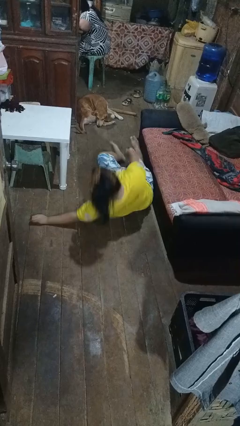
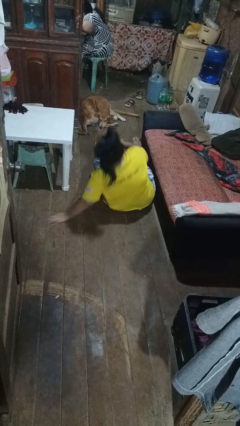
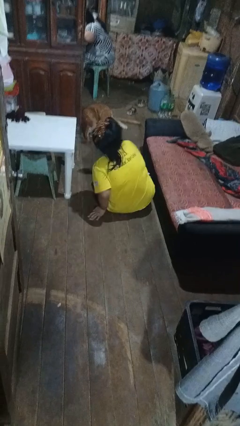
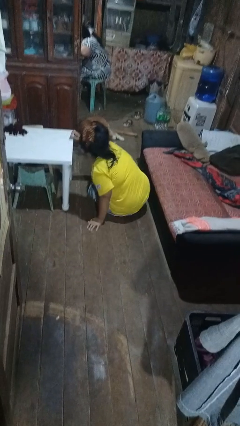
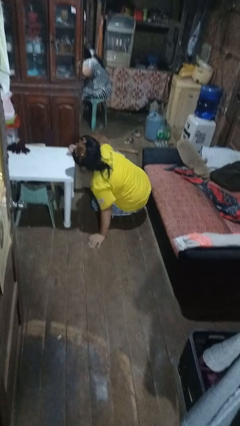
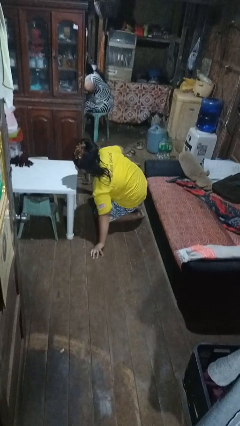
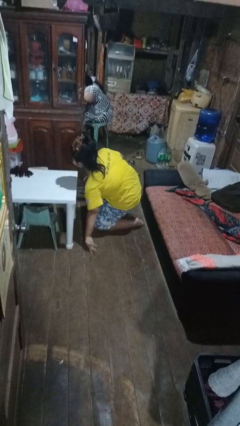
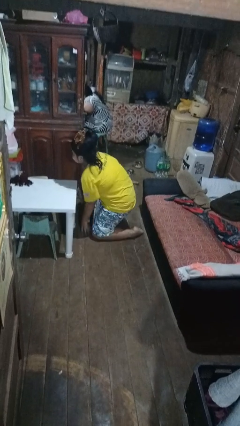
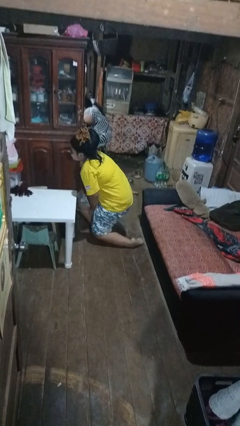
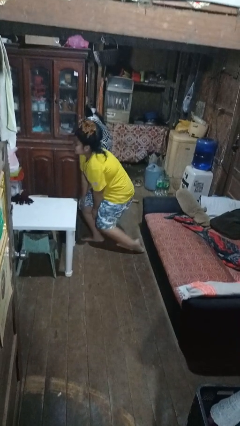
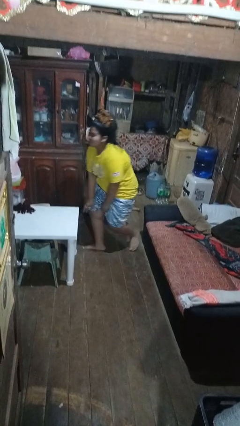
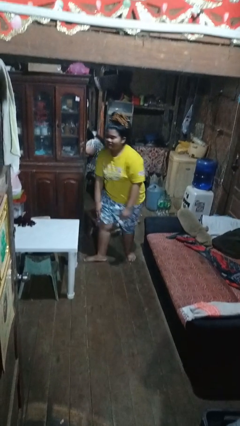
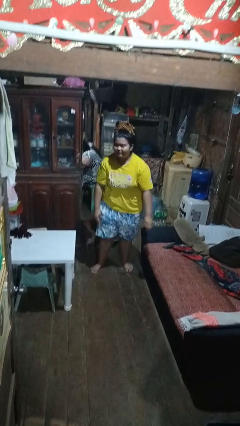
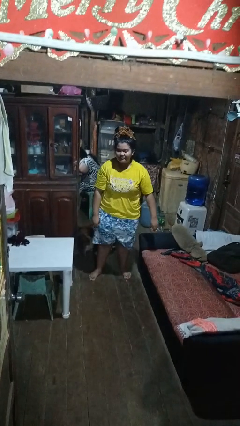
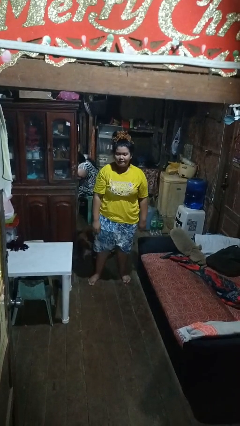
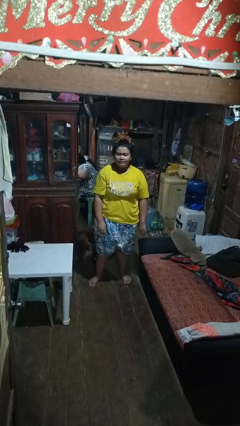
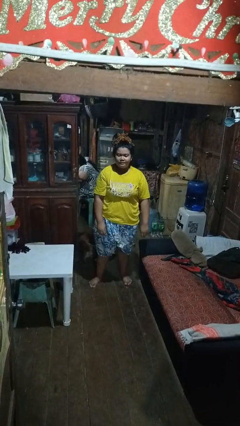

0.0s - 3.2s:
person stands up from floor

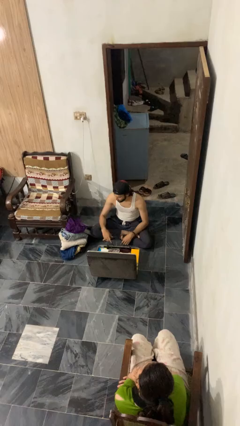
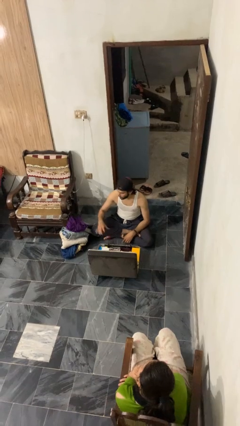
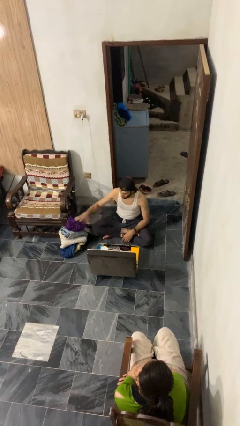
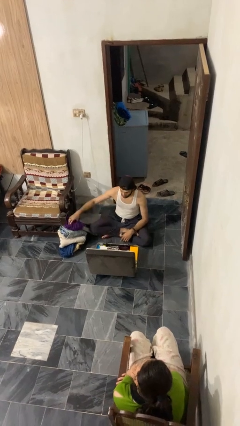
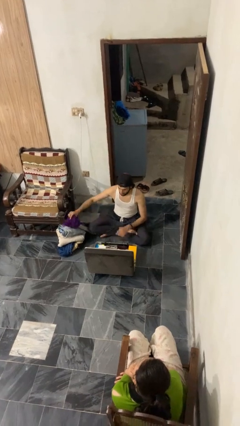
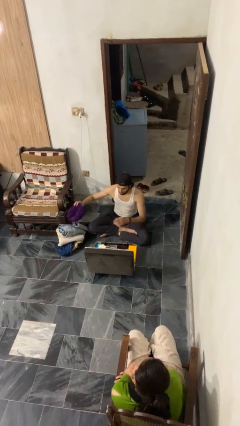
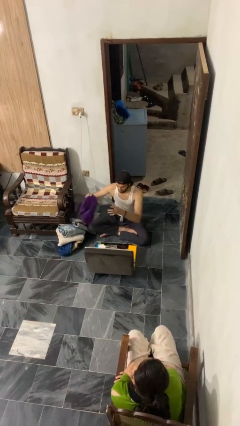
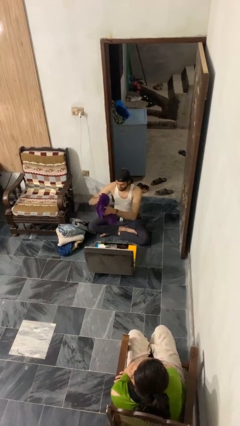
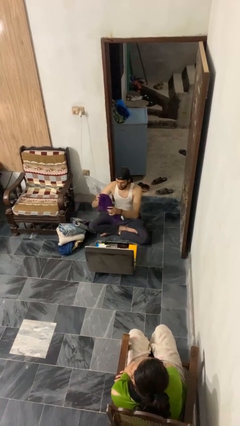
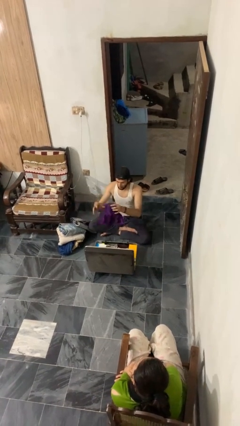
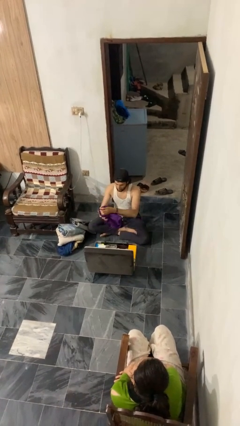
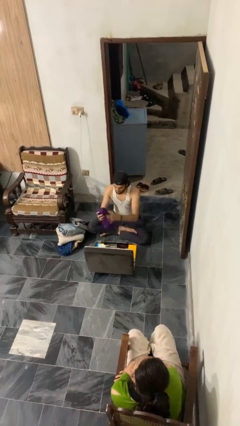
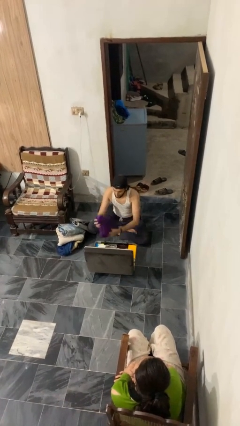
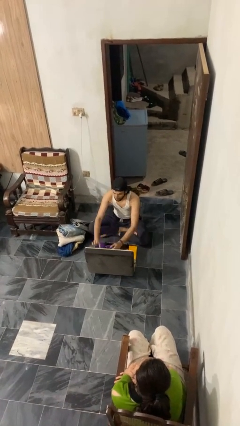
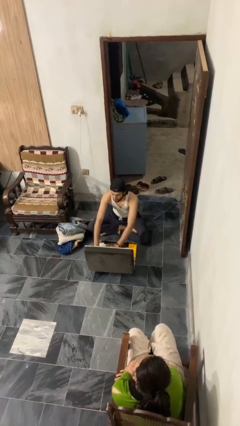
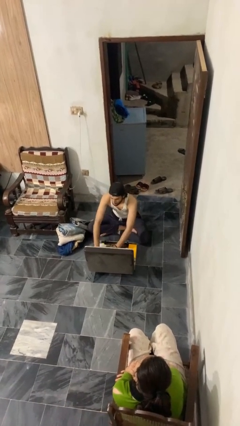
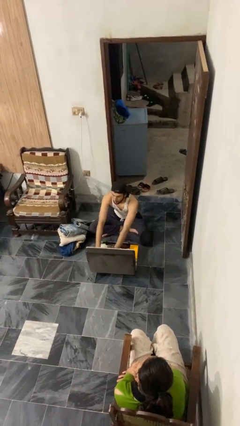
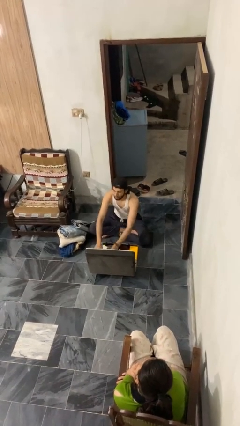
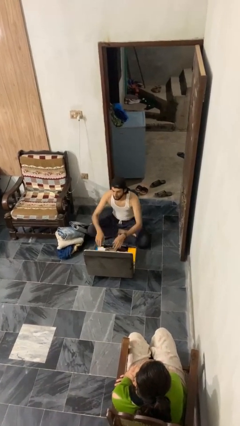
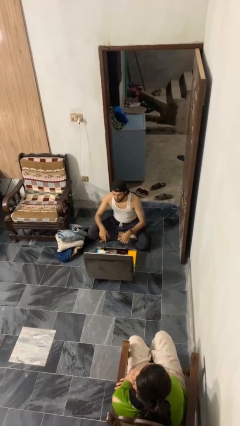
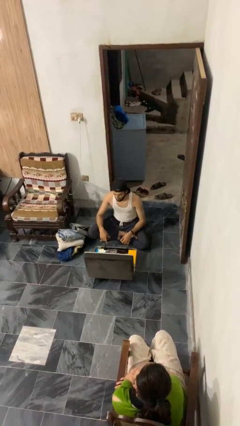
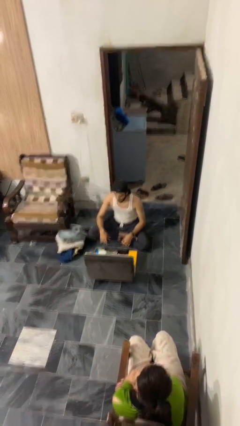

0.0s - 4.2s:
person loads clothes into suitcase

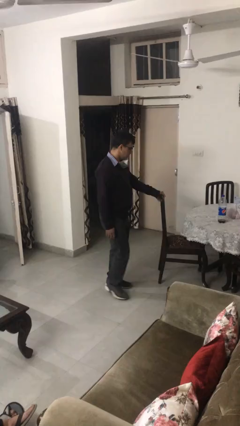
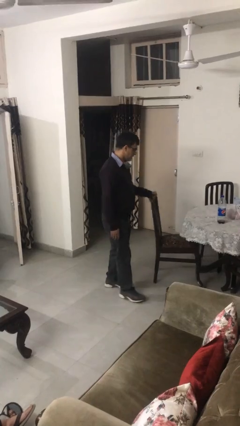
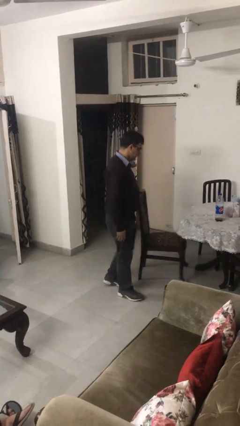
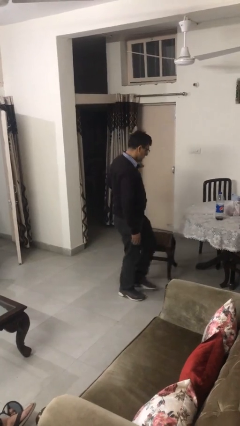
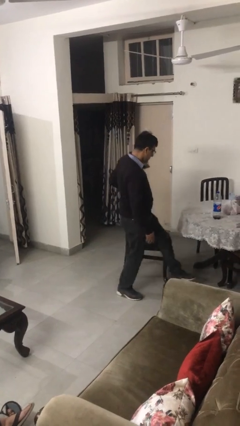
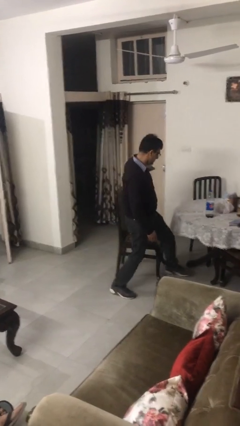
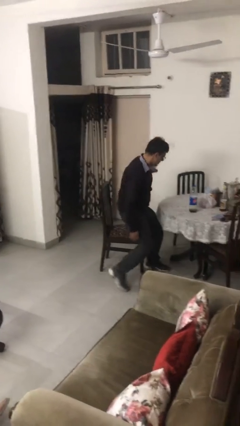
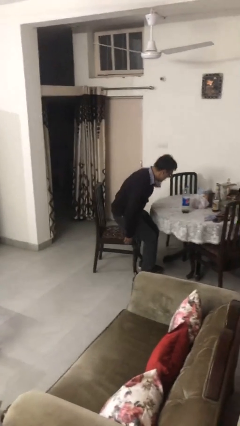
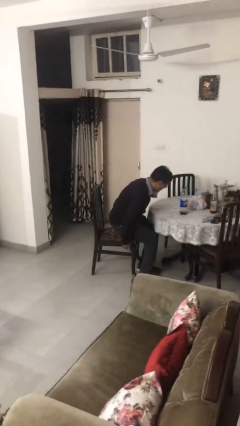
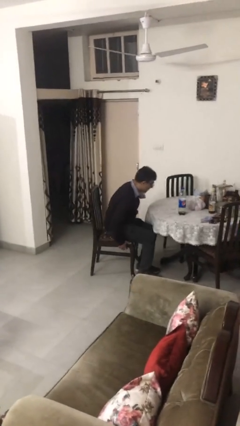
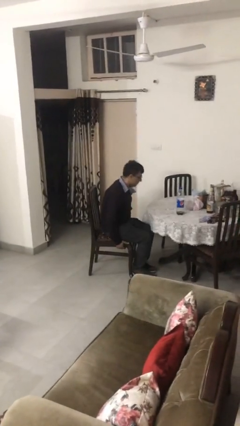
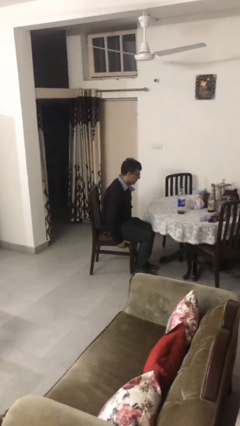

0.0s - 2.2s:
person sits down

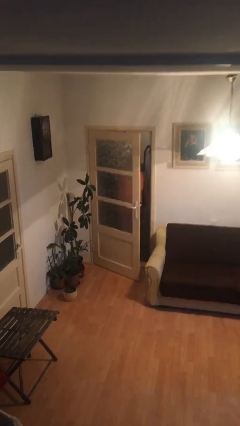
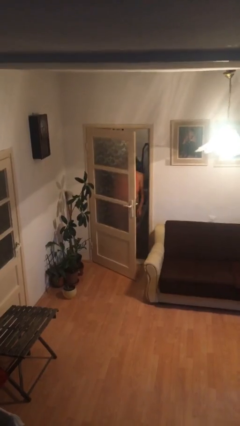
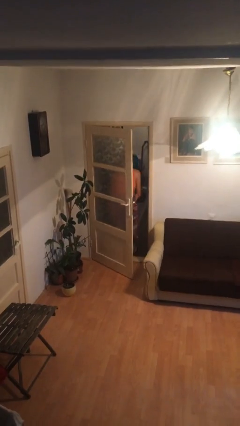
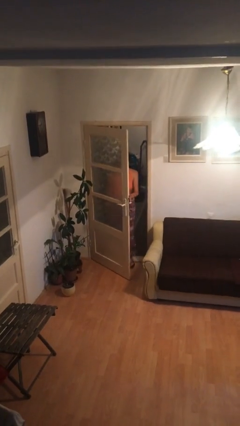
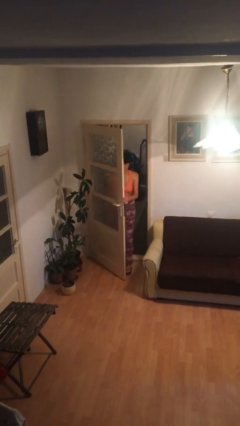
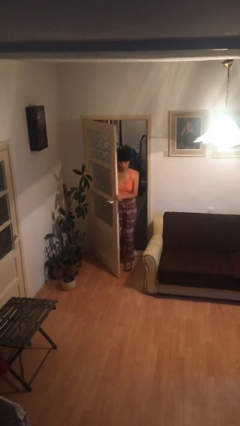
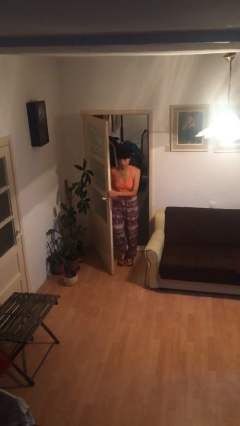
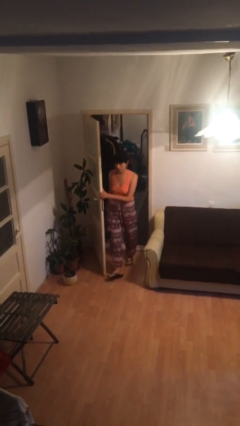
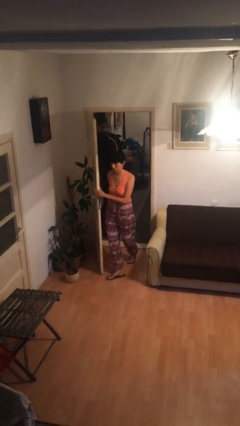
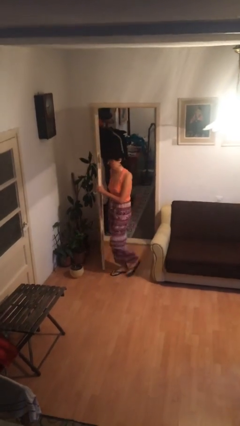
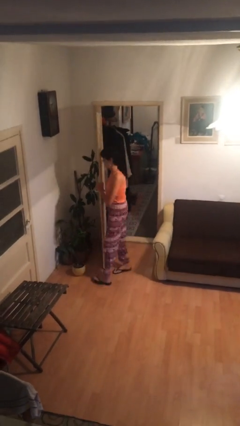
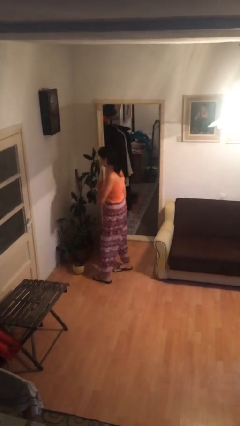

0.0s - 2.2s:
person enters scene through structure

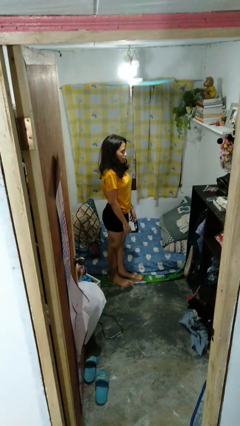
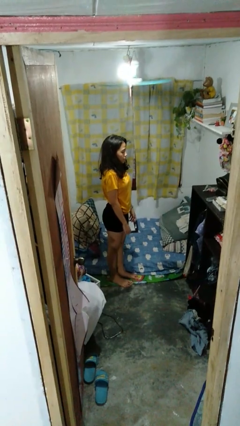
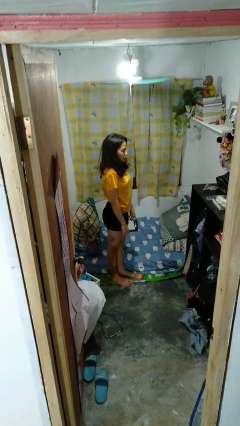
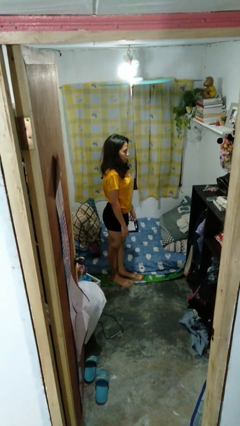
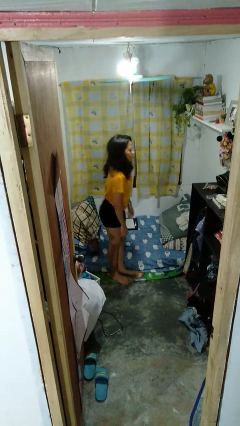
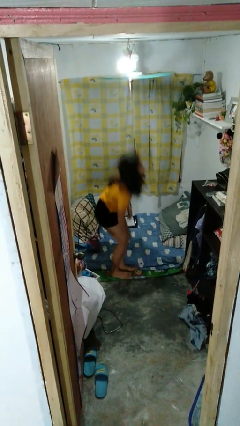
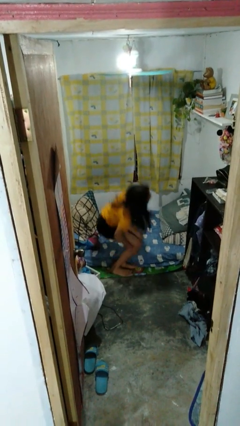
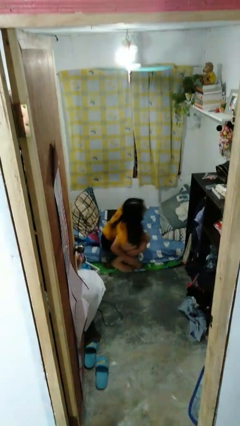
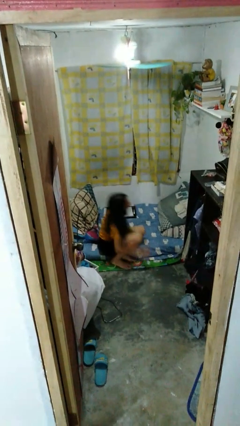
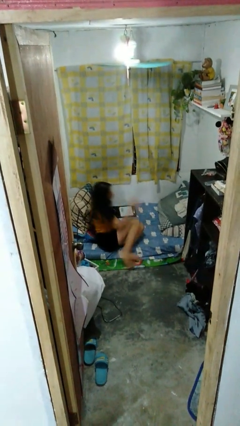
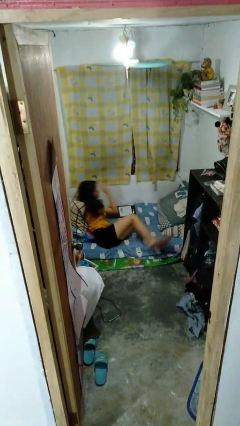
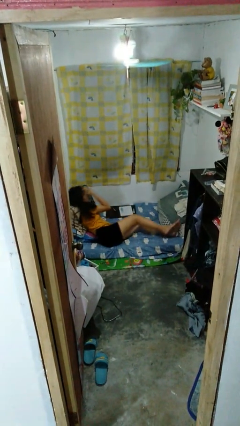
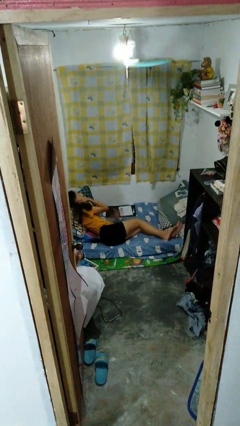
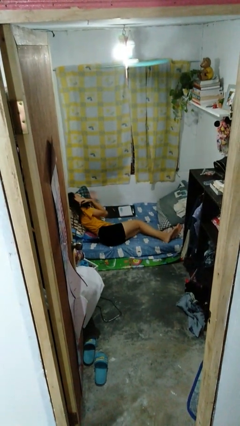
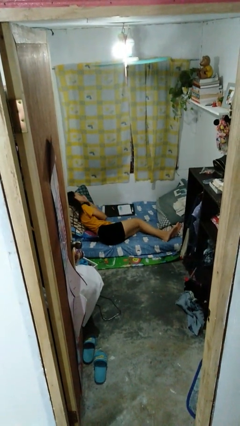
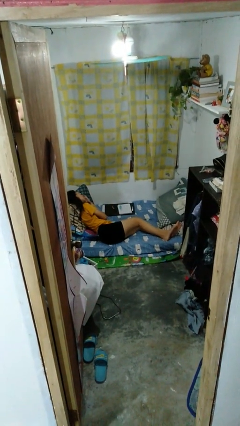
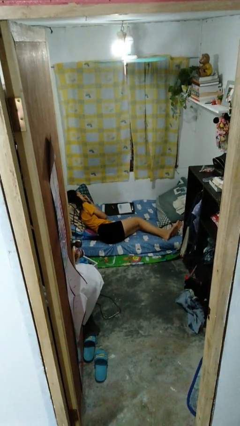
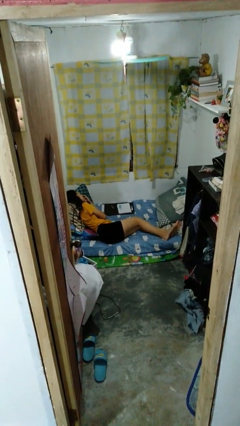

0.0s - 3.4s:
person lies down on bed

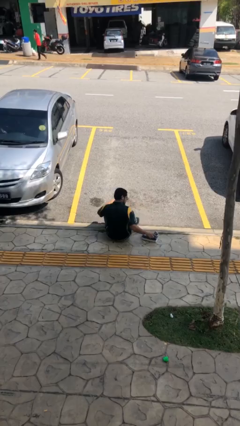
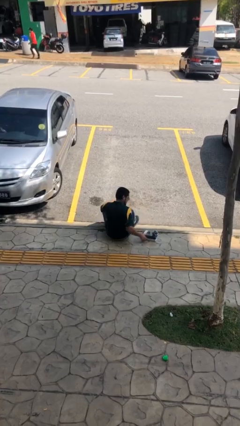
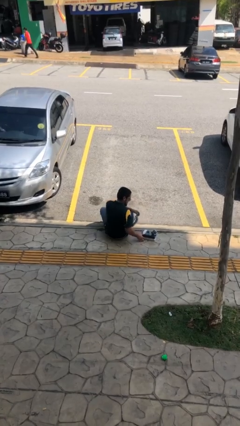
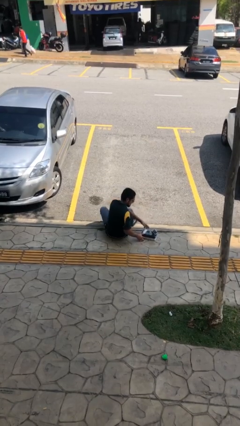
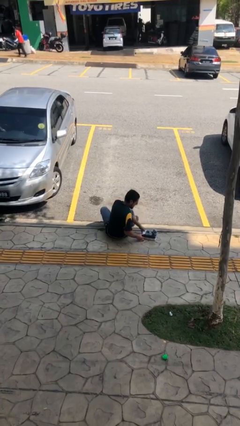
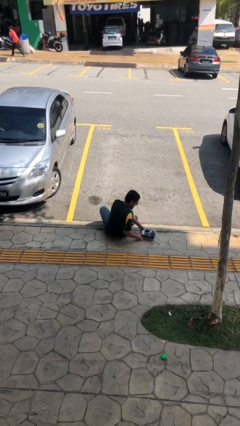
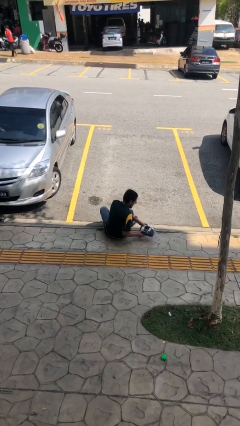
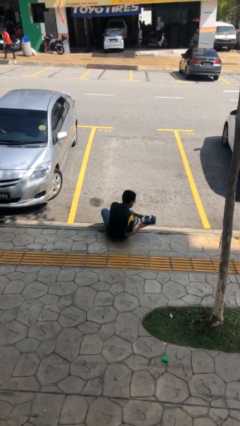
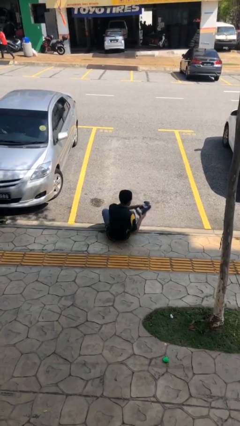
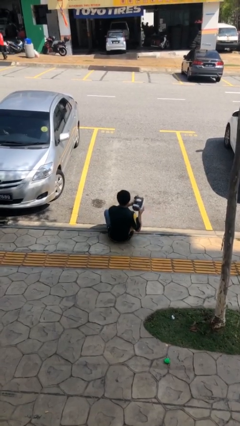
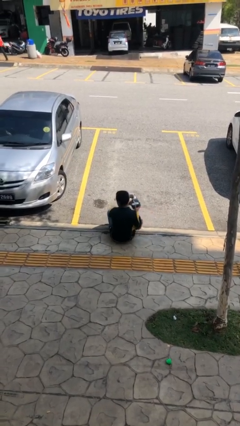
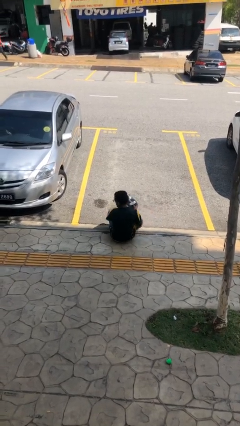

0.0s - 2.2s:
person picks up object from floor
